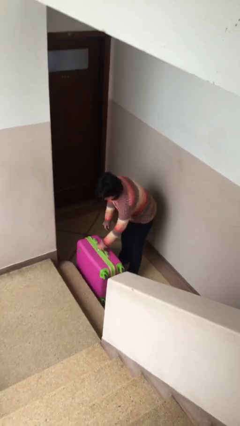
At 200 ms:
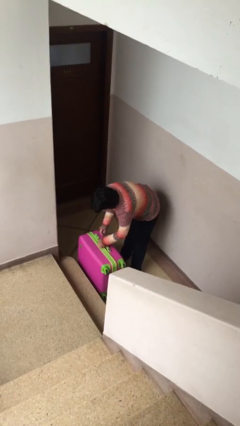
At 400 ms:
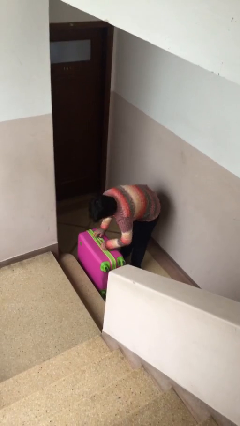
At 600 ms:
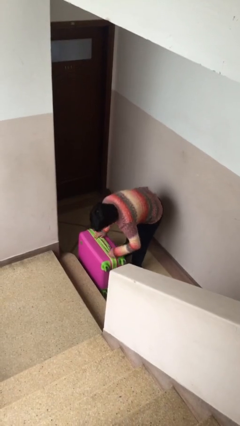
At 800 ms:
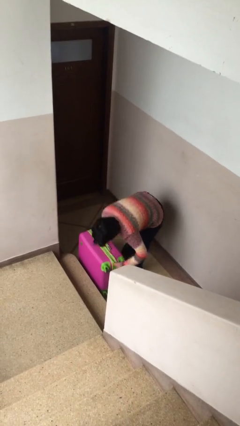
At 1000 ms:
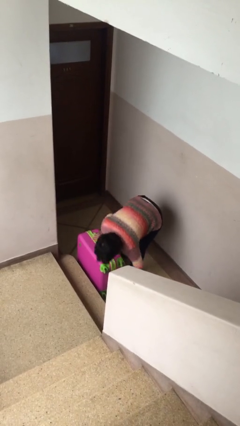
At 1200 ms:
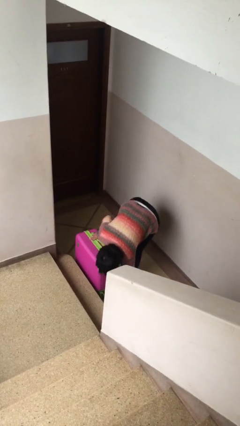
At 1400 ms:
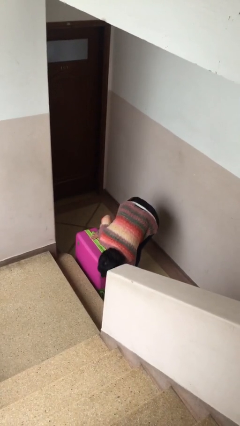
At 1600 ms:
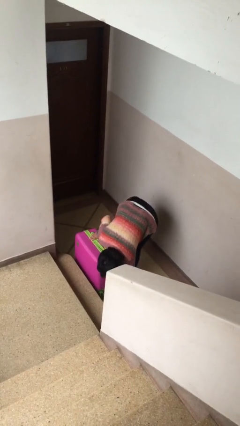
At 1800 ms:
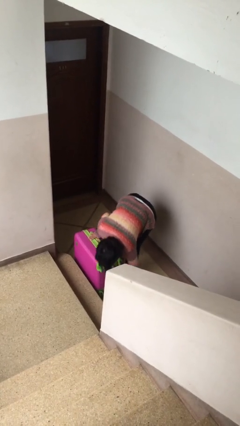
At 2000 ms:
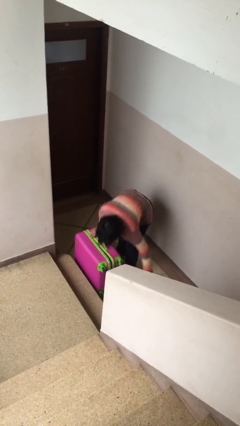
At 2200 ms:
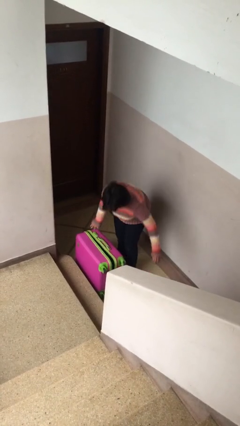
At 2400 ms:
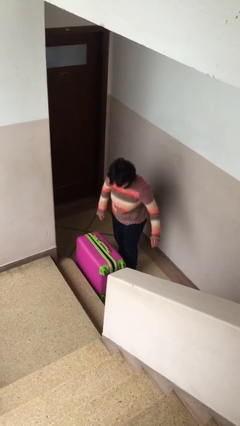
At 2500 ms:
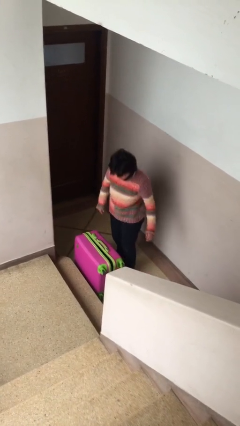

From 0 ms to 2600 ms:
person opens suitcase

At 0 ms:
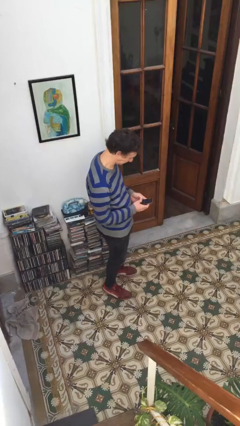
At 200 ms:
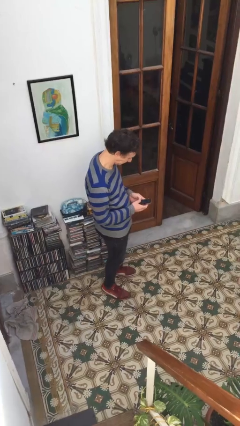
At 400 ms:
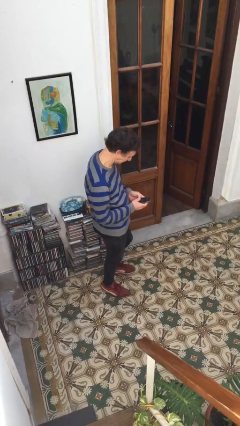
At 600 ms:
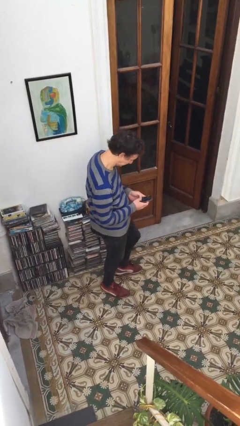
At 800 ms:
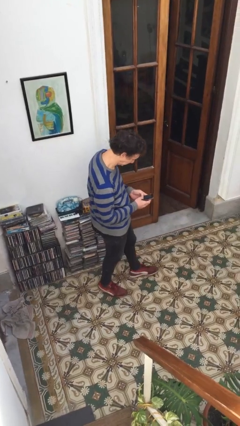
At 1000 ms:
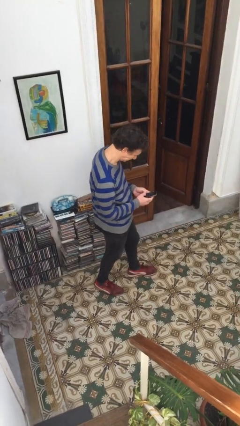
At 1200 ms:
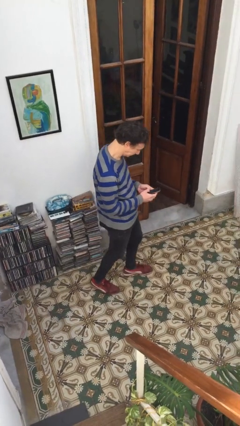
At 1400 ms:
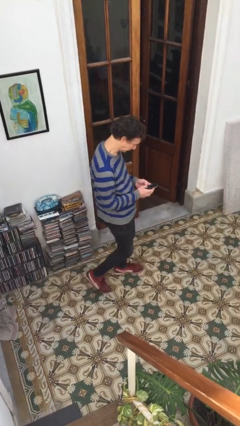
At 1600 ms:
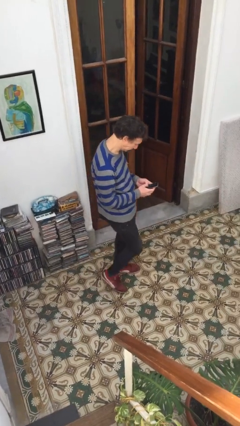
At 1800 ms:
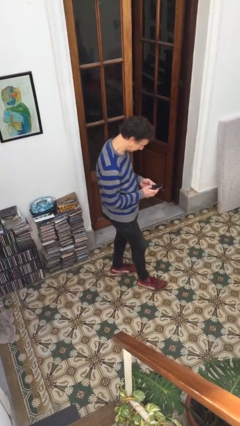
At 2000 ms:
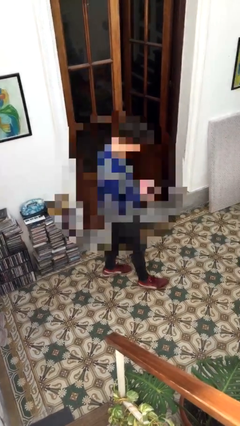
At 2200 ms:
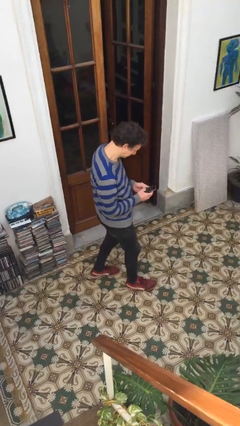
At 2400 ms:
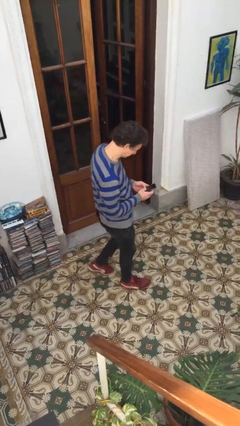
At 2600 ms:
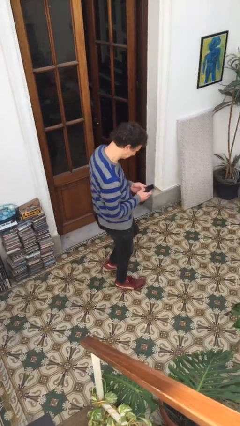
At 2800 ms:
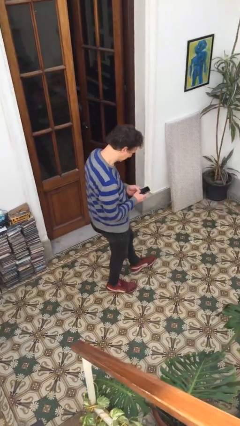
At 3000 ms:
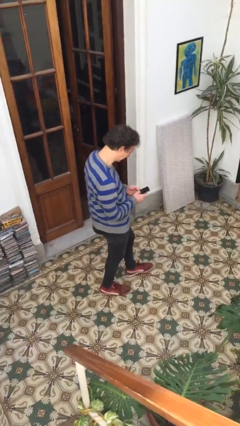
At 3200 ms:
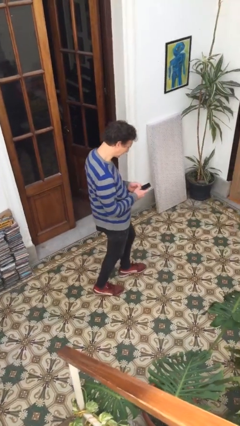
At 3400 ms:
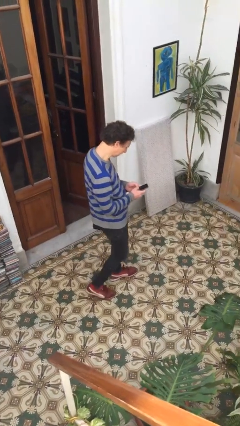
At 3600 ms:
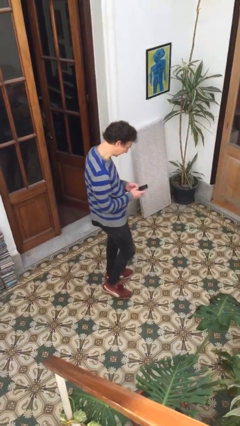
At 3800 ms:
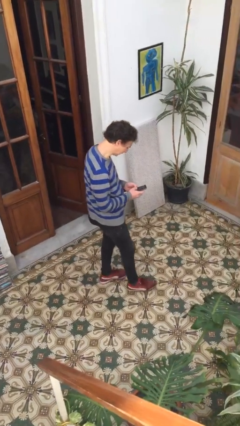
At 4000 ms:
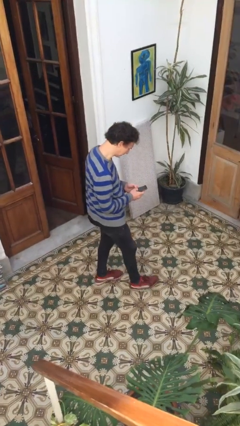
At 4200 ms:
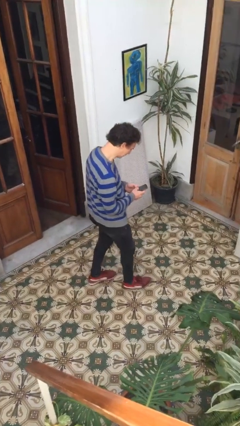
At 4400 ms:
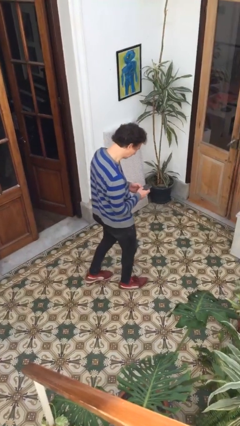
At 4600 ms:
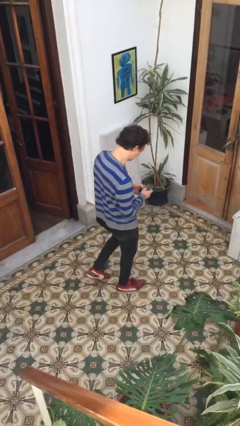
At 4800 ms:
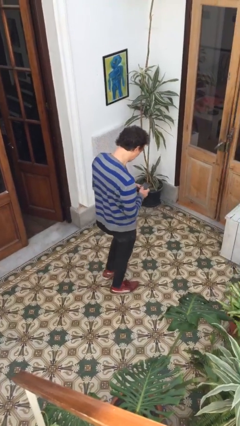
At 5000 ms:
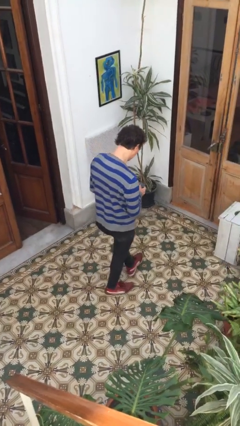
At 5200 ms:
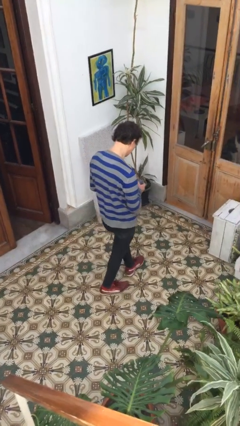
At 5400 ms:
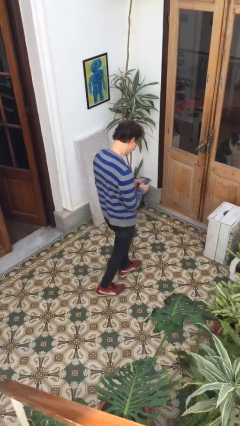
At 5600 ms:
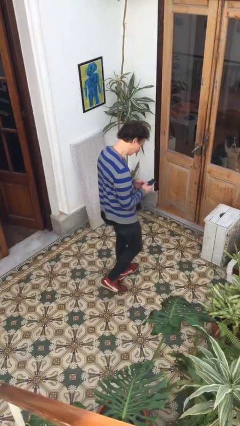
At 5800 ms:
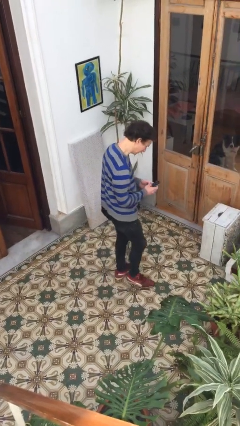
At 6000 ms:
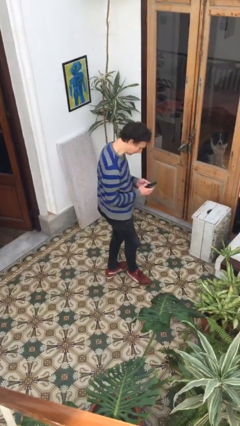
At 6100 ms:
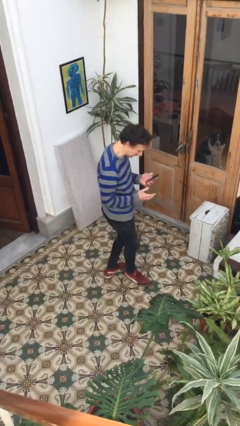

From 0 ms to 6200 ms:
person texts on phone

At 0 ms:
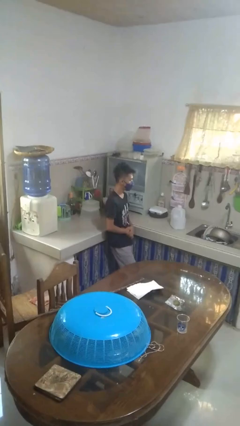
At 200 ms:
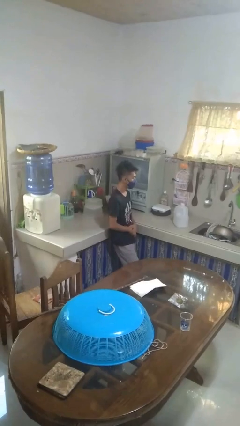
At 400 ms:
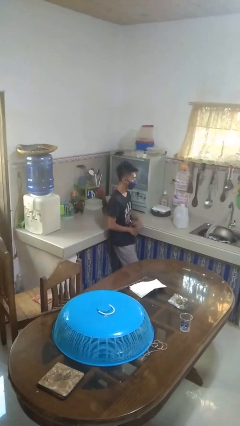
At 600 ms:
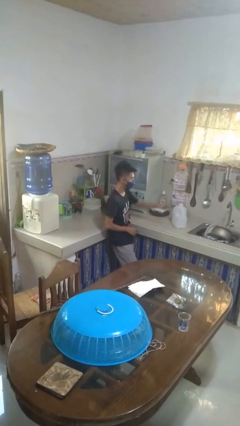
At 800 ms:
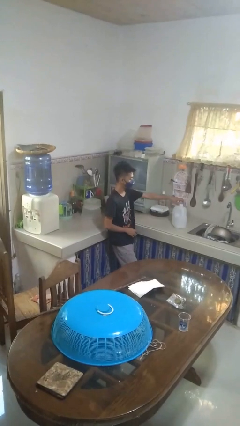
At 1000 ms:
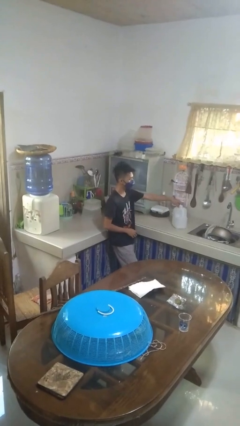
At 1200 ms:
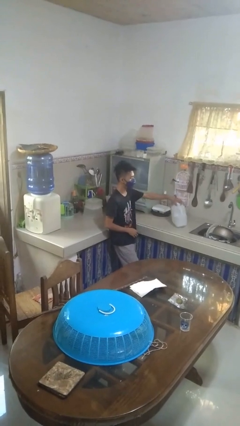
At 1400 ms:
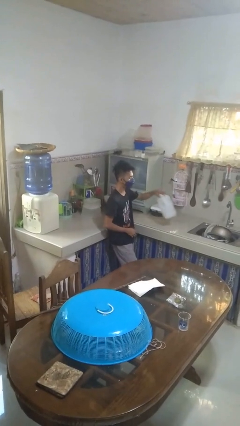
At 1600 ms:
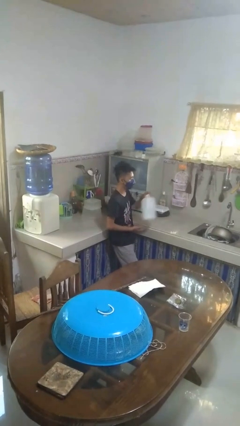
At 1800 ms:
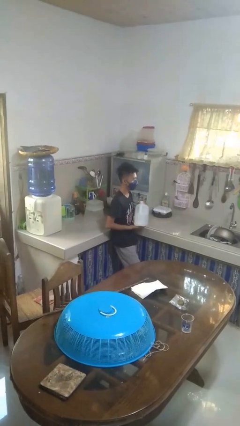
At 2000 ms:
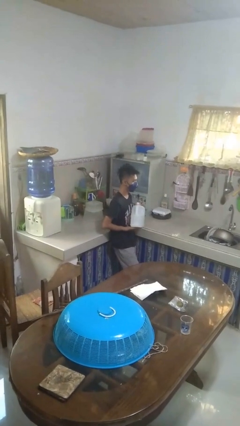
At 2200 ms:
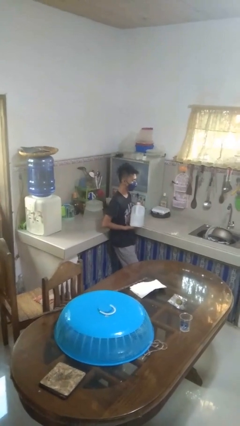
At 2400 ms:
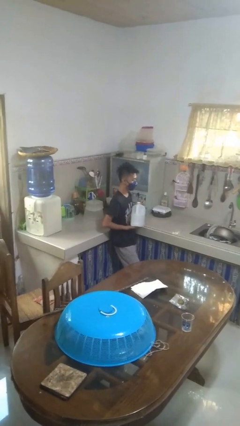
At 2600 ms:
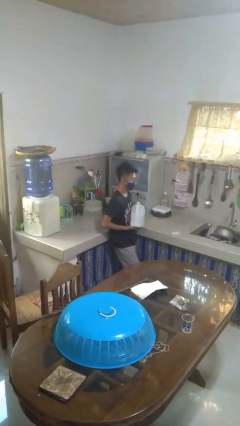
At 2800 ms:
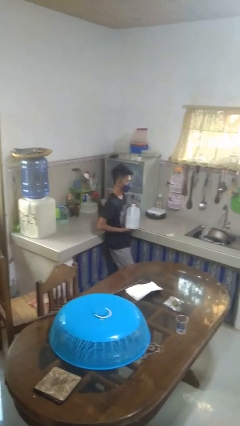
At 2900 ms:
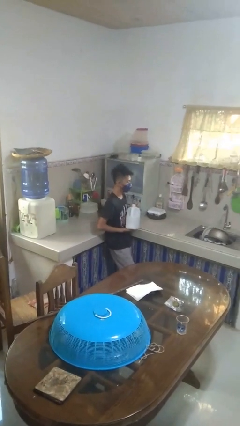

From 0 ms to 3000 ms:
person picks up object from countertop

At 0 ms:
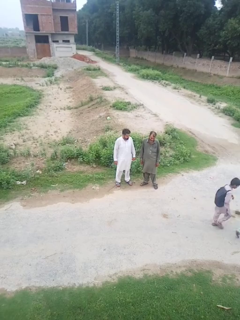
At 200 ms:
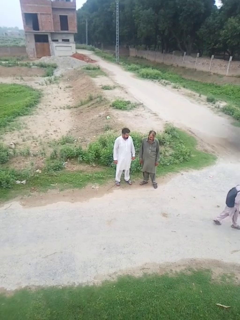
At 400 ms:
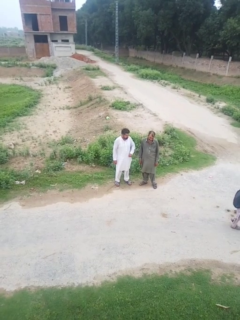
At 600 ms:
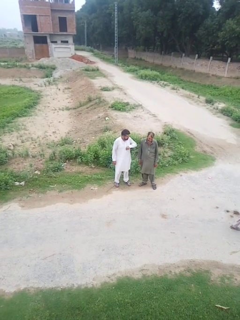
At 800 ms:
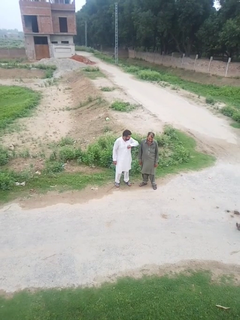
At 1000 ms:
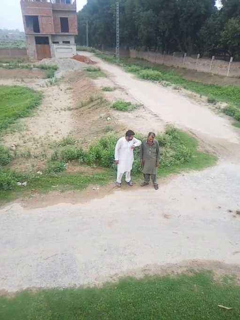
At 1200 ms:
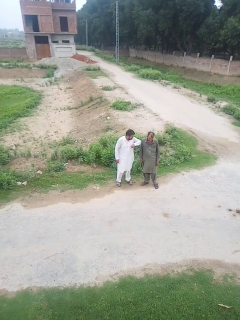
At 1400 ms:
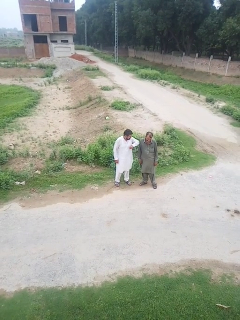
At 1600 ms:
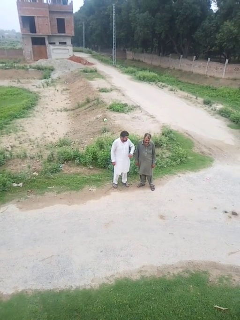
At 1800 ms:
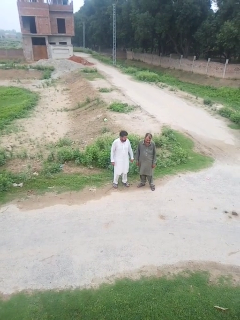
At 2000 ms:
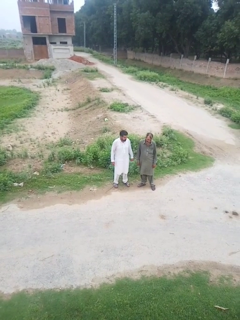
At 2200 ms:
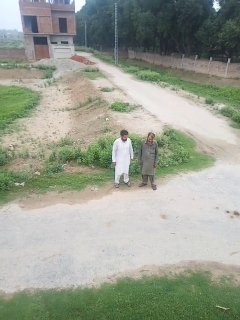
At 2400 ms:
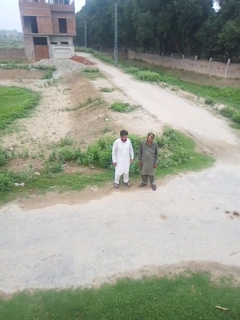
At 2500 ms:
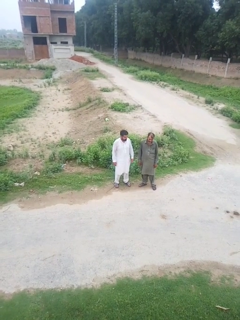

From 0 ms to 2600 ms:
person nudges person with elbow

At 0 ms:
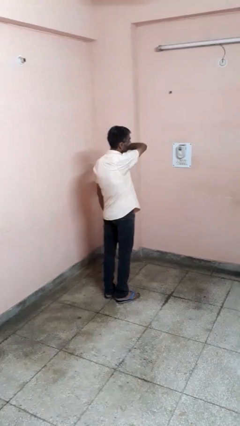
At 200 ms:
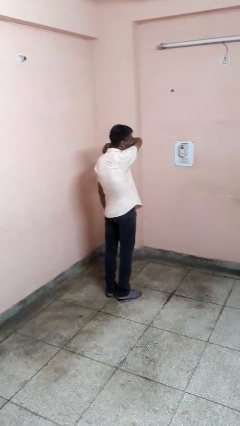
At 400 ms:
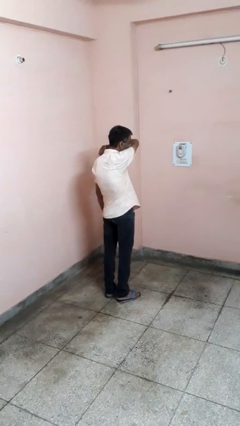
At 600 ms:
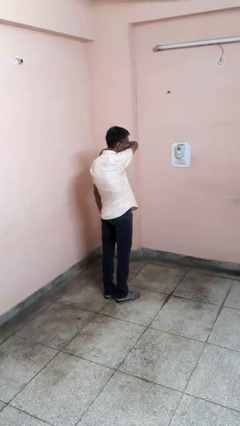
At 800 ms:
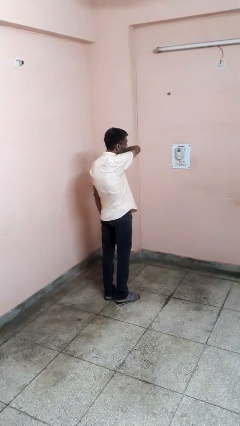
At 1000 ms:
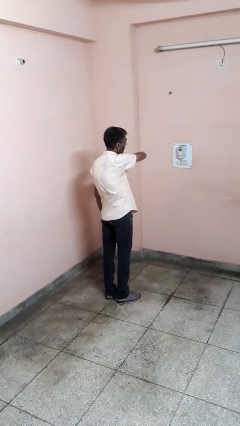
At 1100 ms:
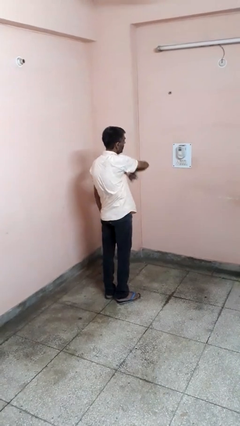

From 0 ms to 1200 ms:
person sneezes into arm

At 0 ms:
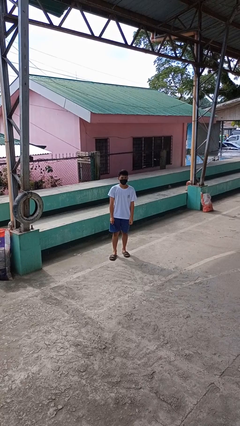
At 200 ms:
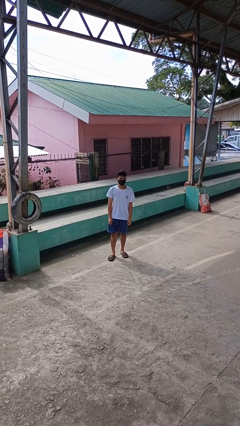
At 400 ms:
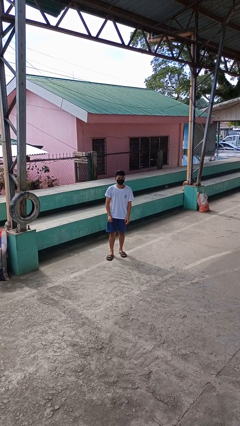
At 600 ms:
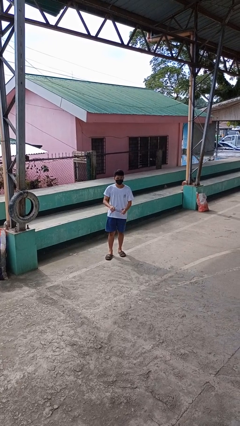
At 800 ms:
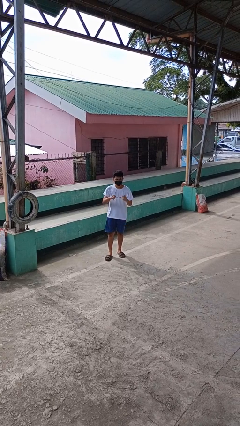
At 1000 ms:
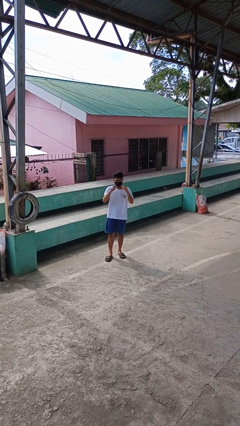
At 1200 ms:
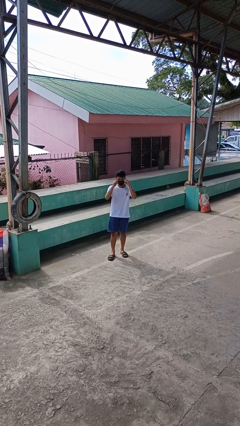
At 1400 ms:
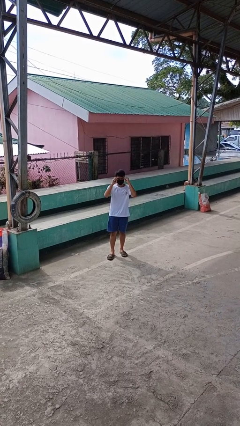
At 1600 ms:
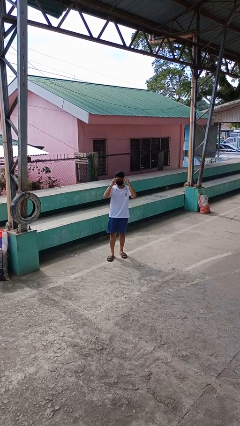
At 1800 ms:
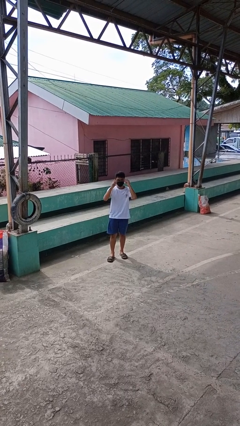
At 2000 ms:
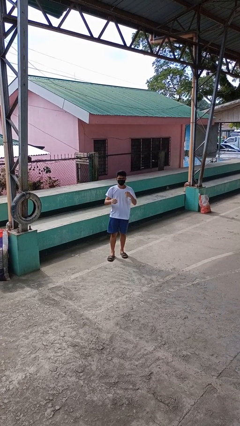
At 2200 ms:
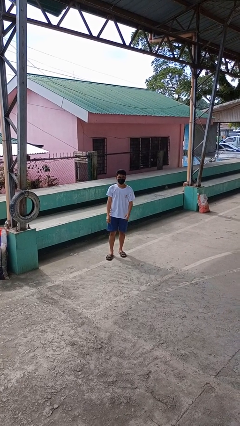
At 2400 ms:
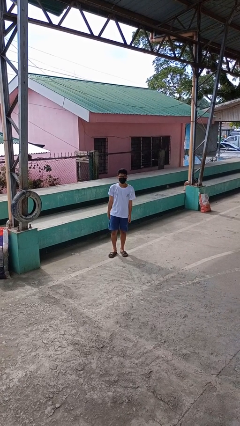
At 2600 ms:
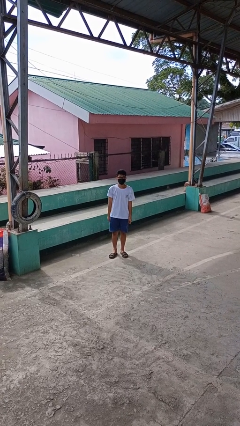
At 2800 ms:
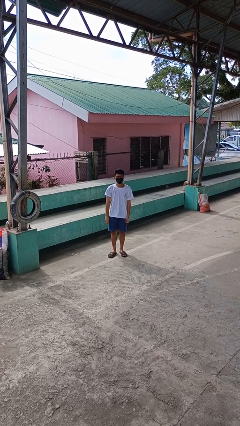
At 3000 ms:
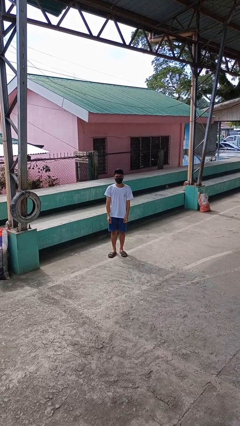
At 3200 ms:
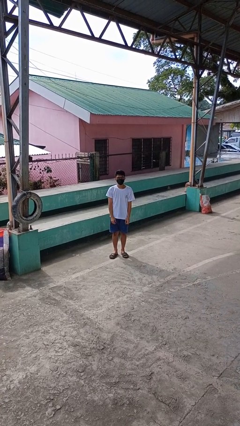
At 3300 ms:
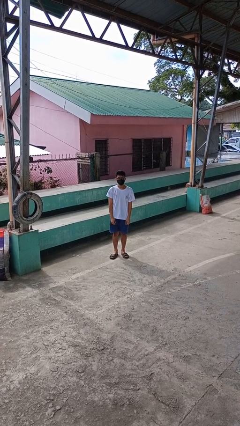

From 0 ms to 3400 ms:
person puts on glasses
